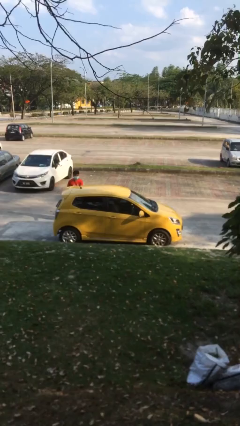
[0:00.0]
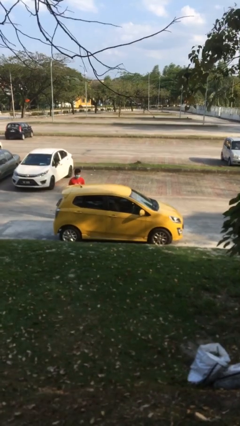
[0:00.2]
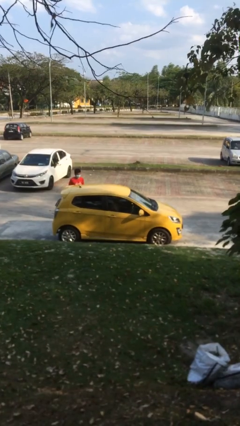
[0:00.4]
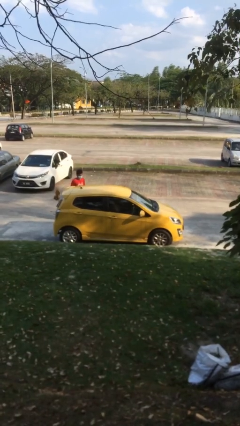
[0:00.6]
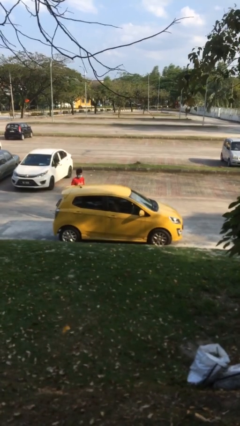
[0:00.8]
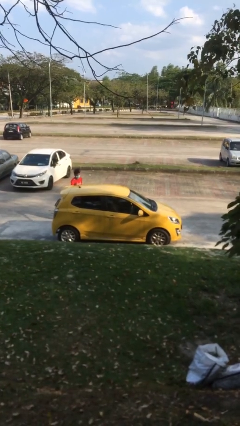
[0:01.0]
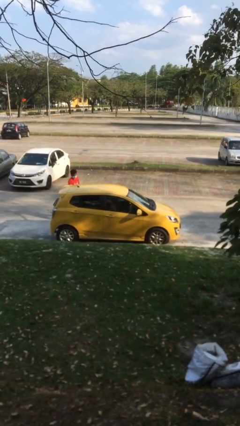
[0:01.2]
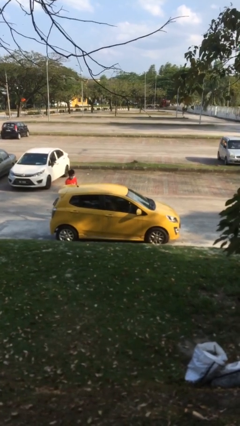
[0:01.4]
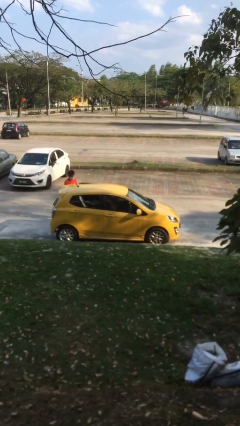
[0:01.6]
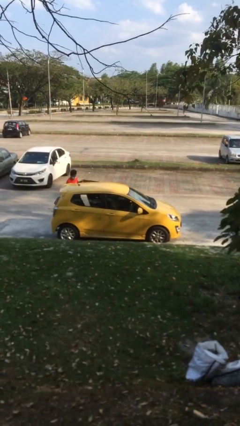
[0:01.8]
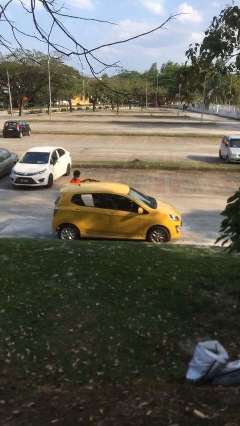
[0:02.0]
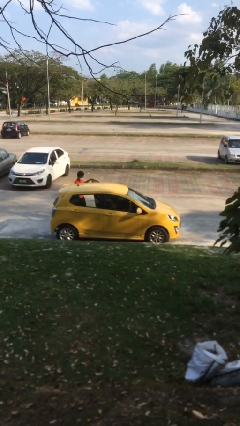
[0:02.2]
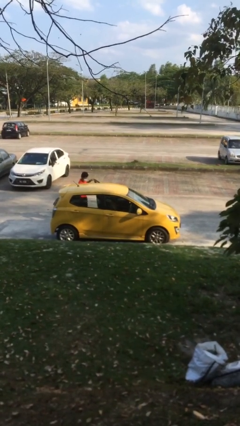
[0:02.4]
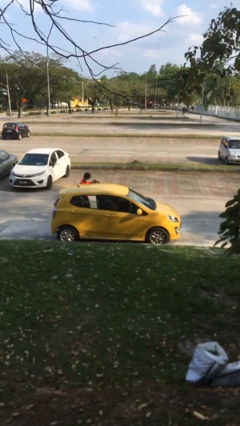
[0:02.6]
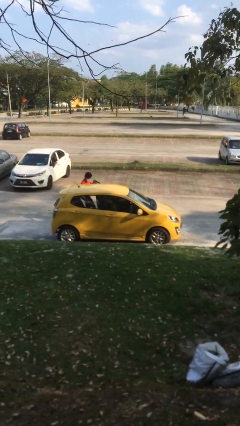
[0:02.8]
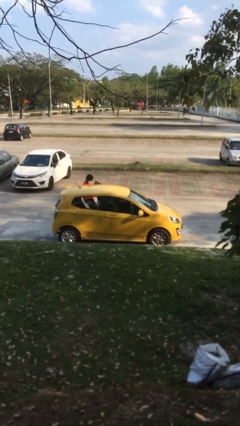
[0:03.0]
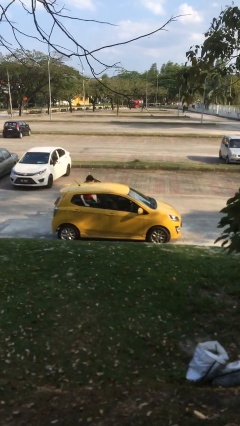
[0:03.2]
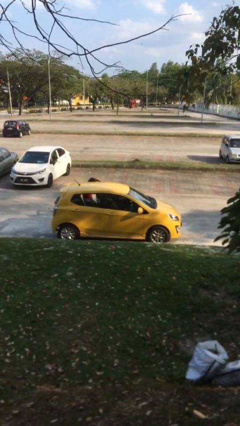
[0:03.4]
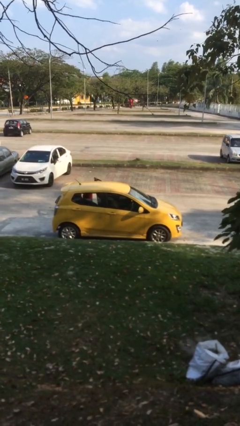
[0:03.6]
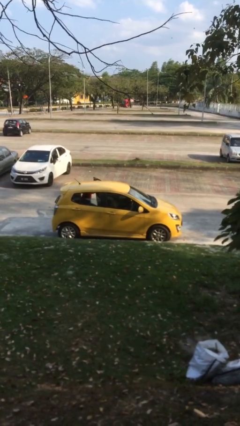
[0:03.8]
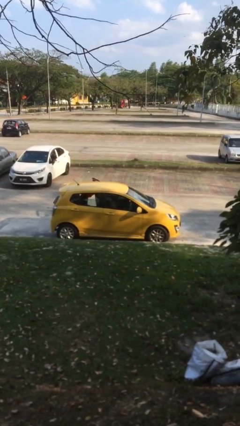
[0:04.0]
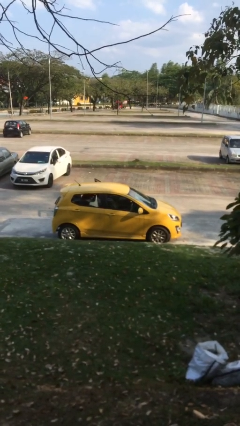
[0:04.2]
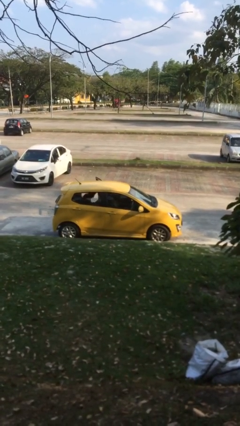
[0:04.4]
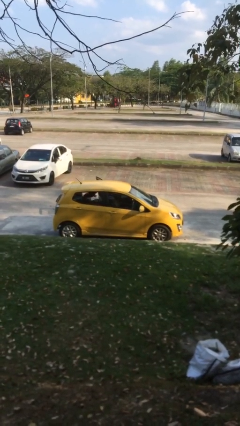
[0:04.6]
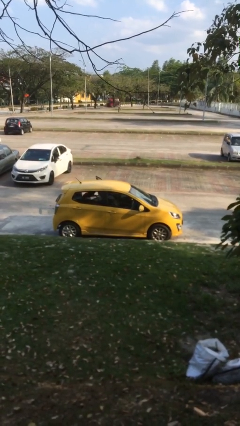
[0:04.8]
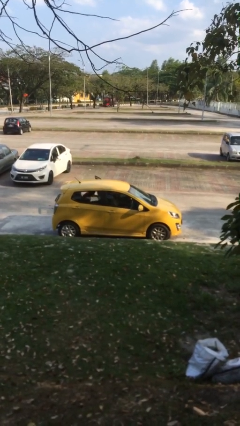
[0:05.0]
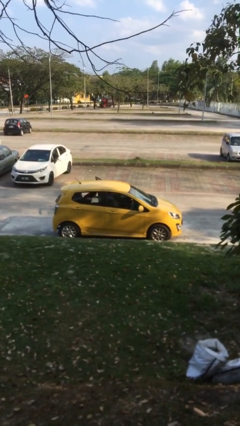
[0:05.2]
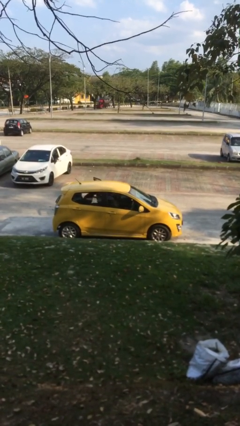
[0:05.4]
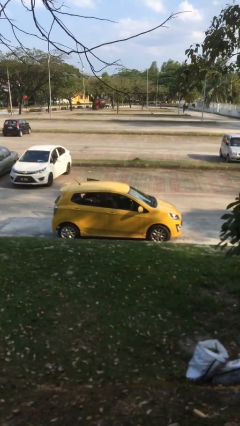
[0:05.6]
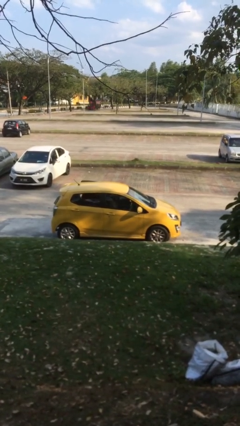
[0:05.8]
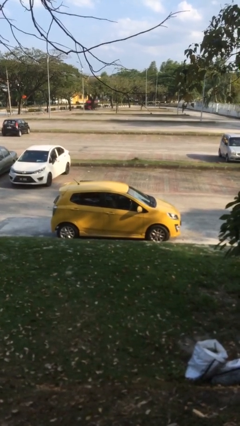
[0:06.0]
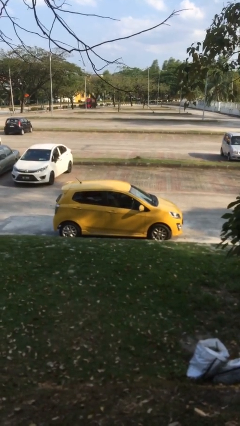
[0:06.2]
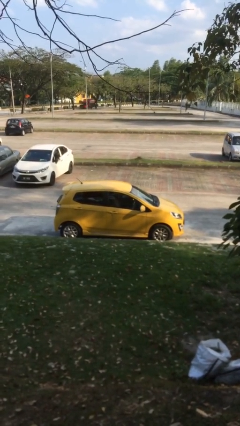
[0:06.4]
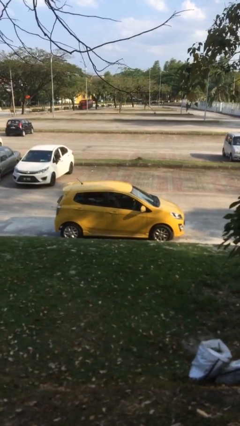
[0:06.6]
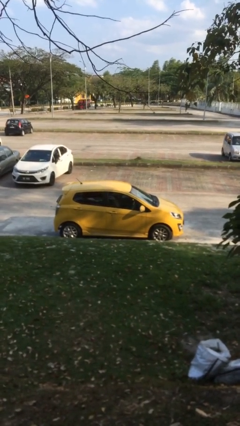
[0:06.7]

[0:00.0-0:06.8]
car picks up person

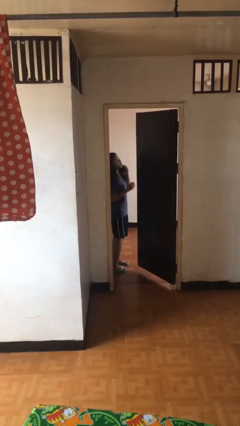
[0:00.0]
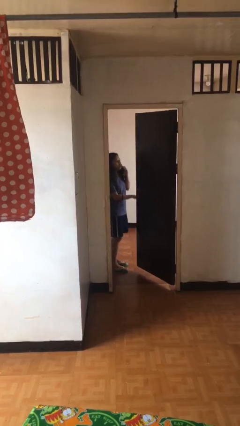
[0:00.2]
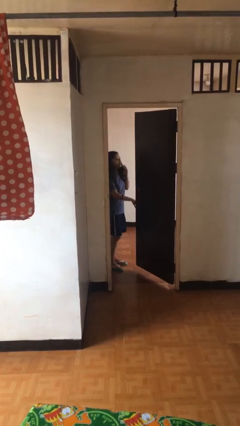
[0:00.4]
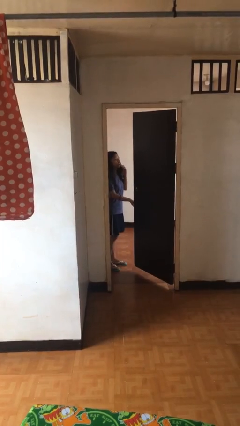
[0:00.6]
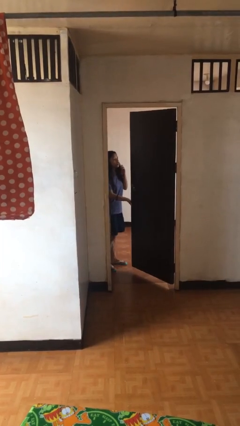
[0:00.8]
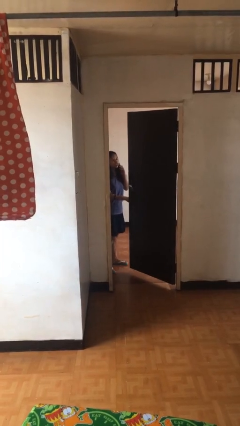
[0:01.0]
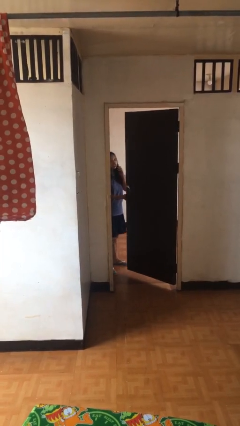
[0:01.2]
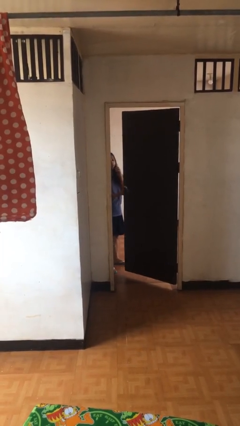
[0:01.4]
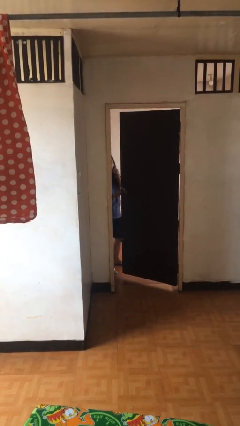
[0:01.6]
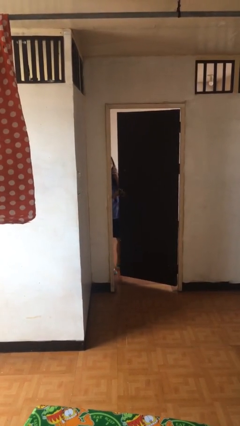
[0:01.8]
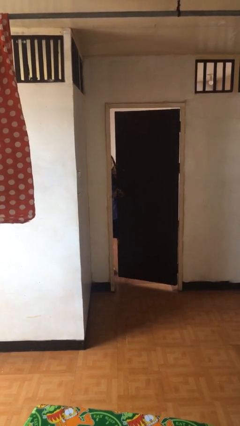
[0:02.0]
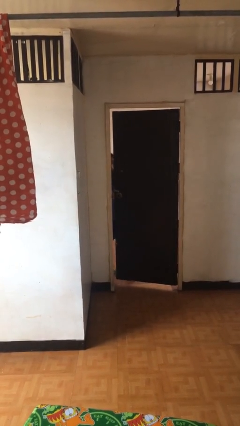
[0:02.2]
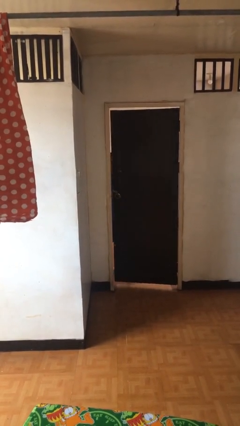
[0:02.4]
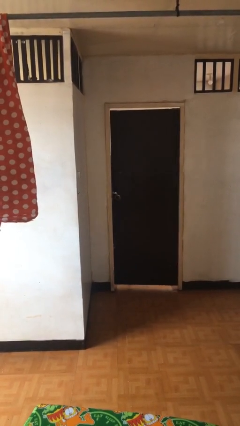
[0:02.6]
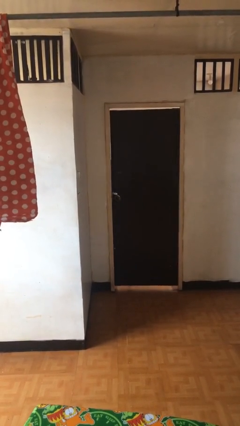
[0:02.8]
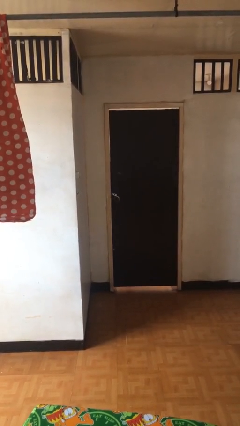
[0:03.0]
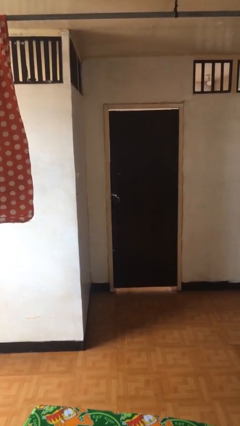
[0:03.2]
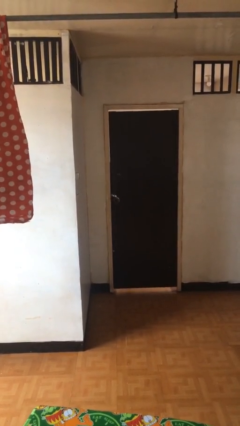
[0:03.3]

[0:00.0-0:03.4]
person closes facility door

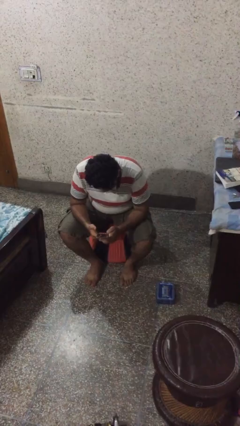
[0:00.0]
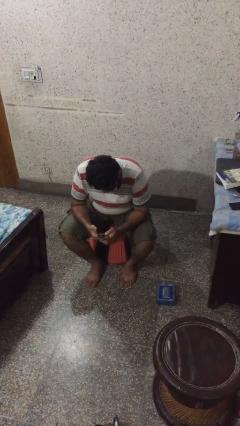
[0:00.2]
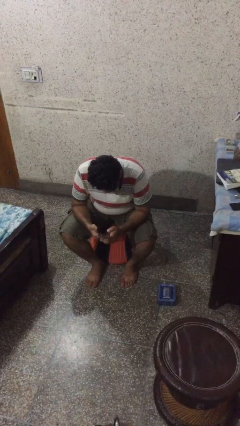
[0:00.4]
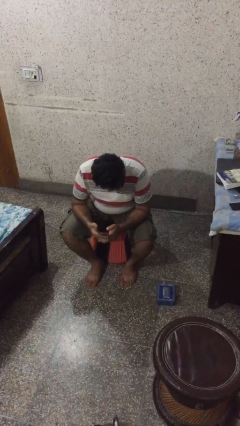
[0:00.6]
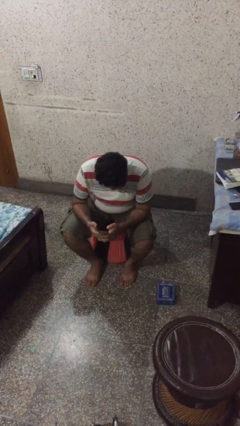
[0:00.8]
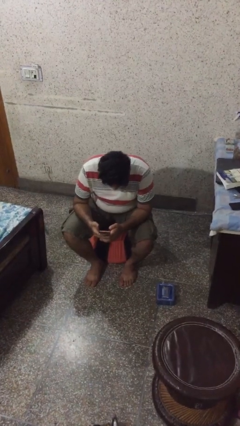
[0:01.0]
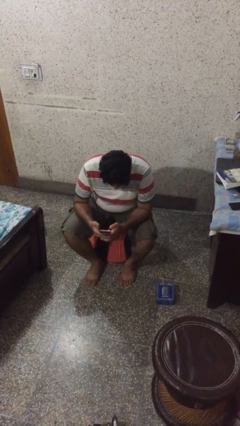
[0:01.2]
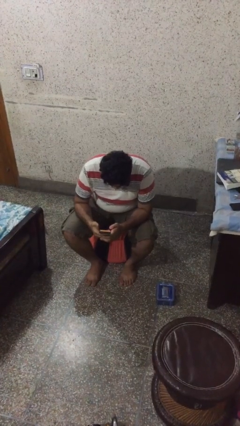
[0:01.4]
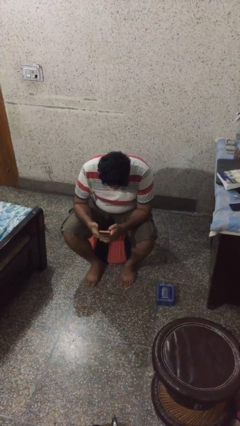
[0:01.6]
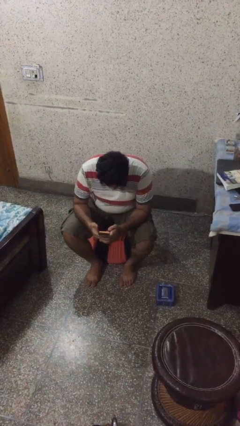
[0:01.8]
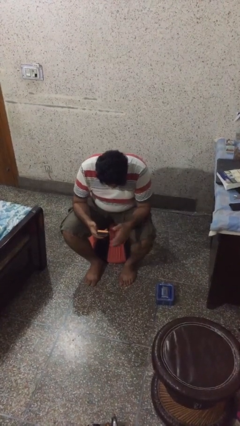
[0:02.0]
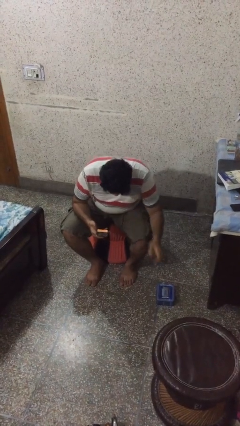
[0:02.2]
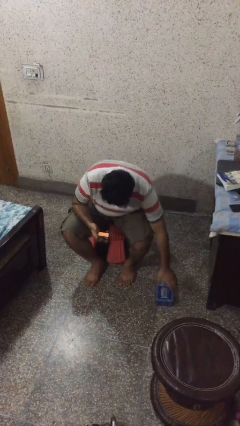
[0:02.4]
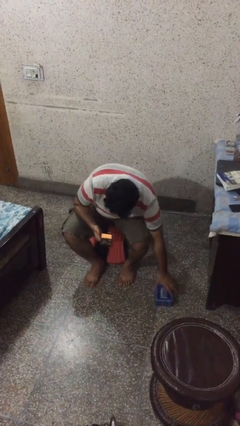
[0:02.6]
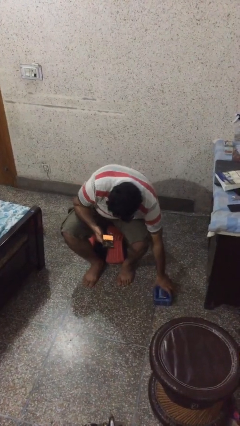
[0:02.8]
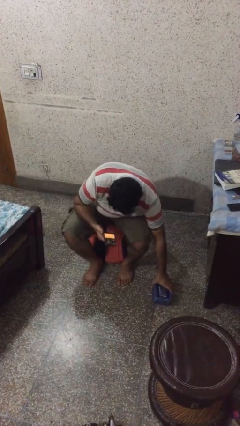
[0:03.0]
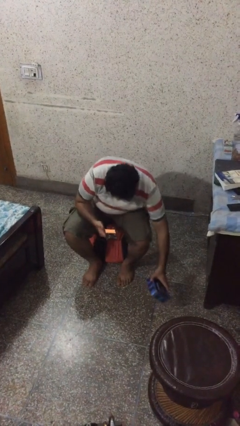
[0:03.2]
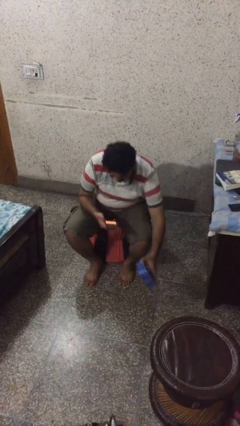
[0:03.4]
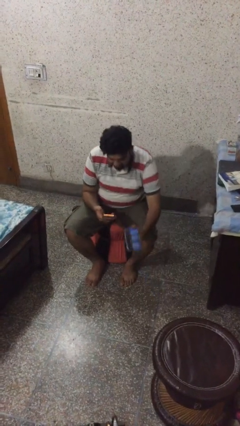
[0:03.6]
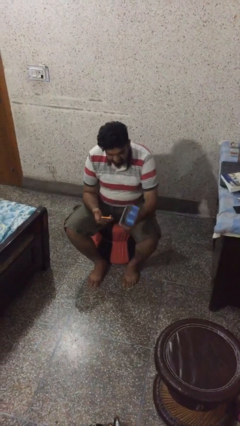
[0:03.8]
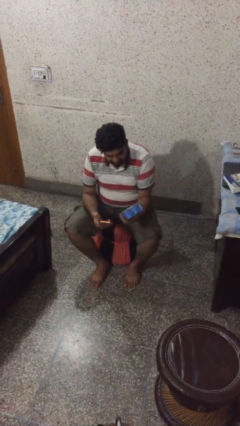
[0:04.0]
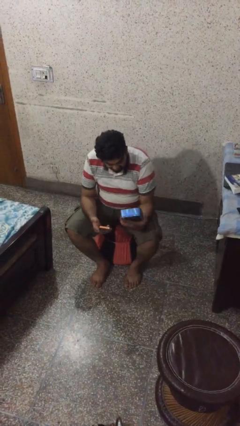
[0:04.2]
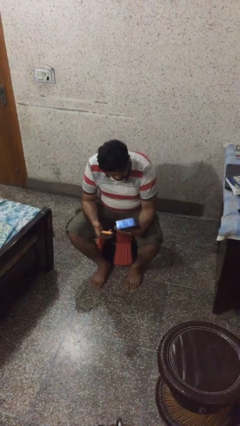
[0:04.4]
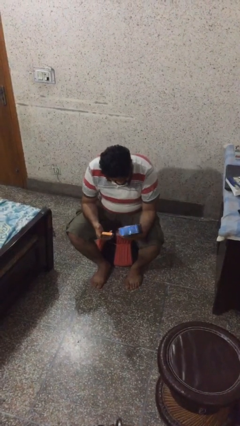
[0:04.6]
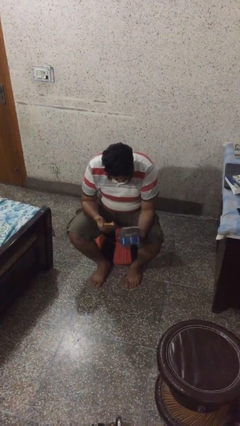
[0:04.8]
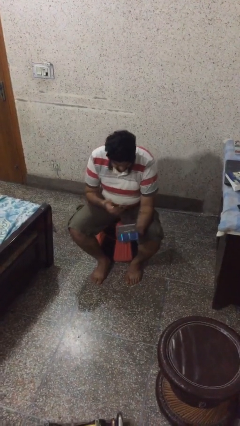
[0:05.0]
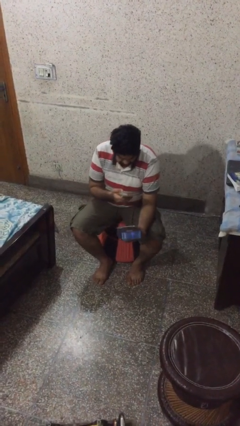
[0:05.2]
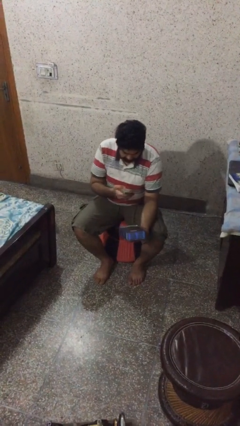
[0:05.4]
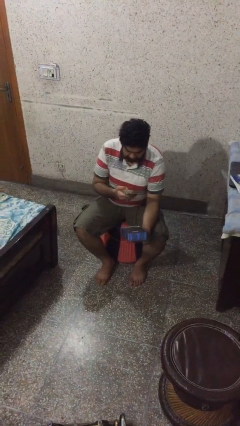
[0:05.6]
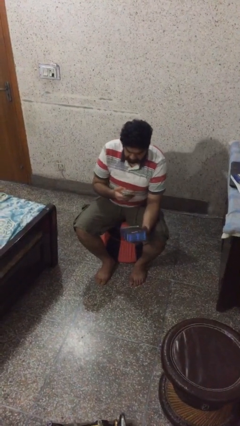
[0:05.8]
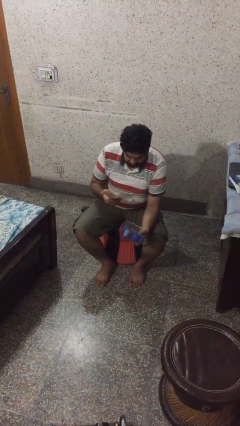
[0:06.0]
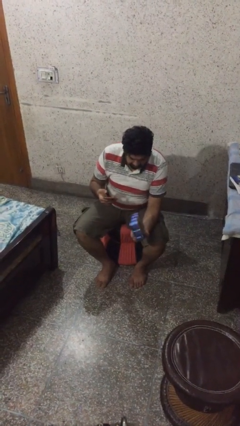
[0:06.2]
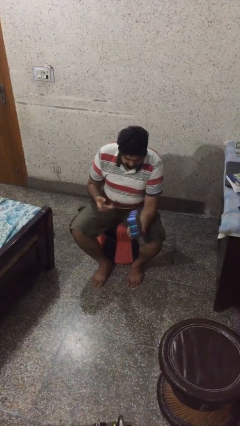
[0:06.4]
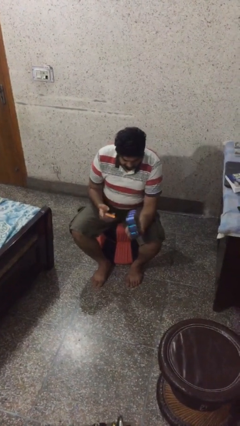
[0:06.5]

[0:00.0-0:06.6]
person picks up object from floor

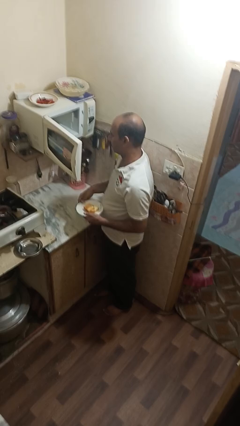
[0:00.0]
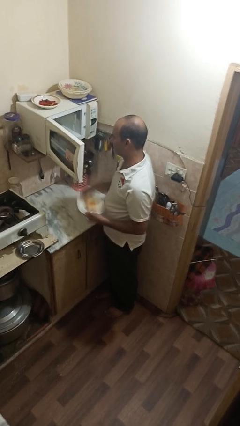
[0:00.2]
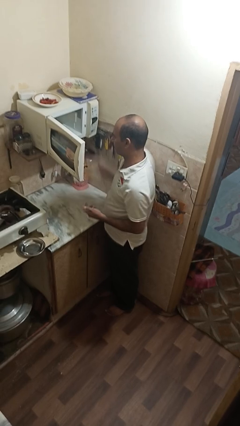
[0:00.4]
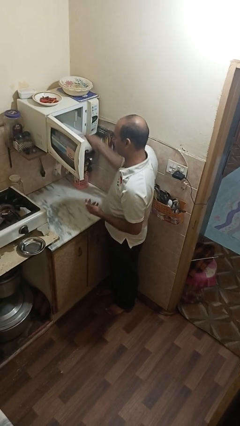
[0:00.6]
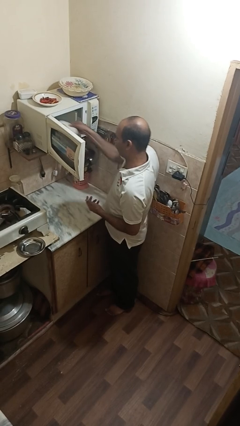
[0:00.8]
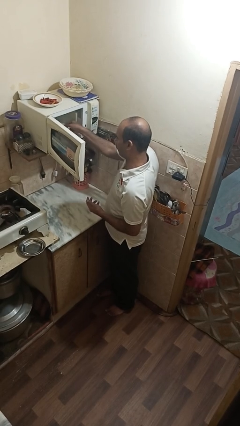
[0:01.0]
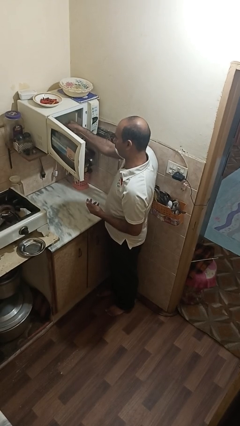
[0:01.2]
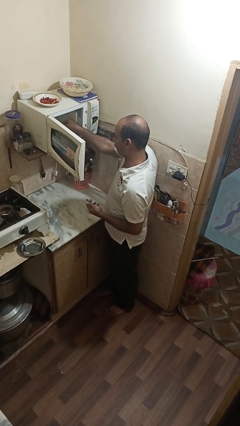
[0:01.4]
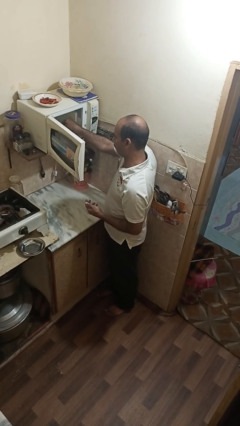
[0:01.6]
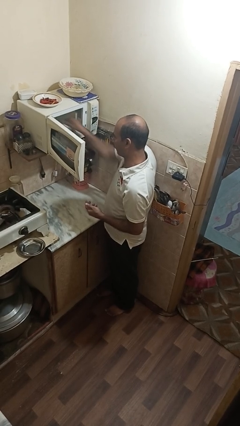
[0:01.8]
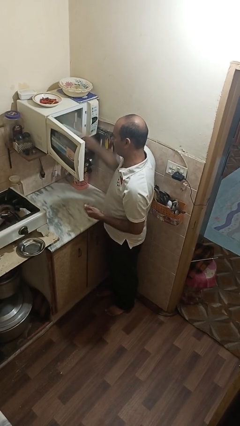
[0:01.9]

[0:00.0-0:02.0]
person puts object into microwave
